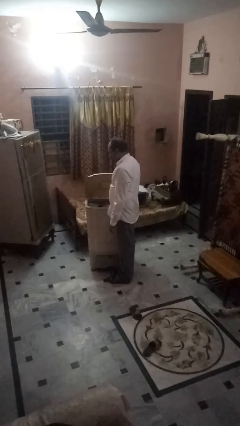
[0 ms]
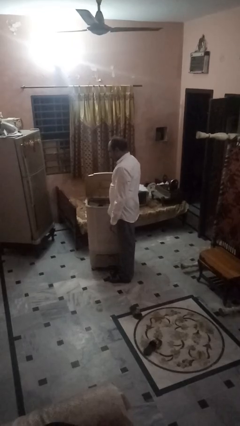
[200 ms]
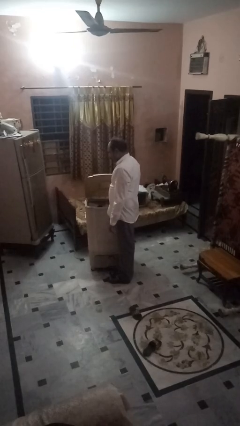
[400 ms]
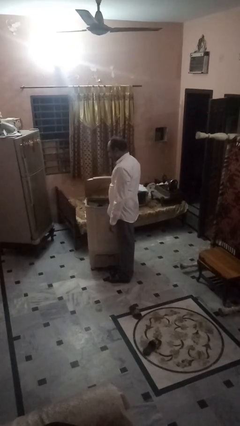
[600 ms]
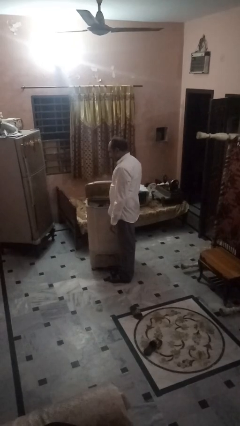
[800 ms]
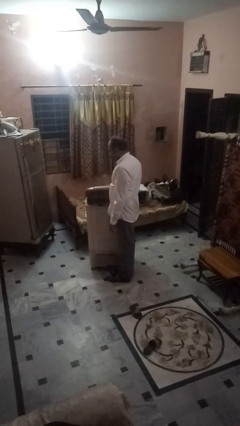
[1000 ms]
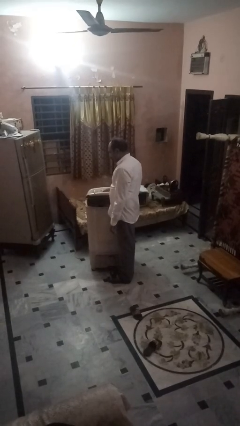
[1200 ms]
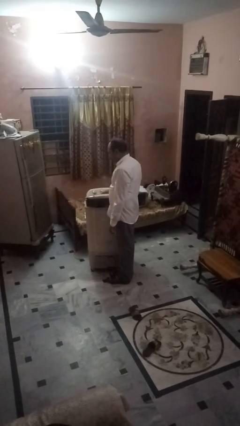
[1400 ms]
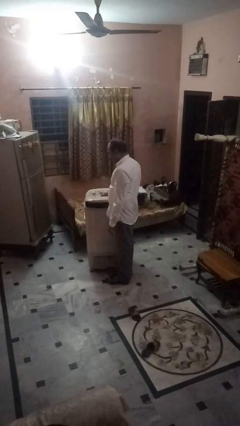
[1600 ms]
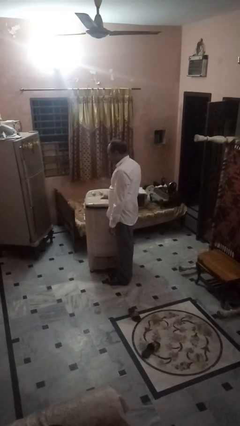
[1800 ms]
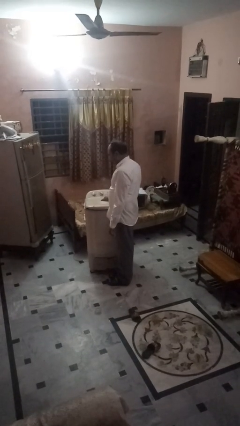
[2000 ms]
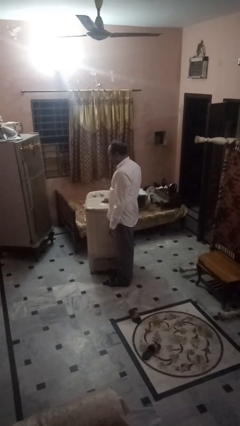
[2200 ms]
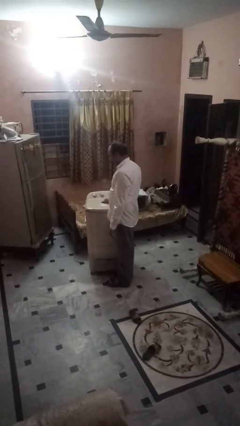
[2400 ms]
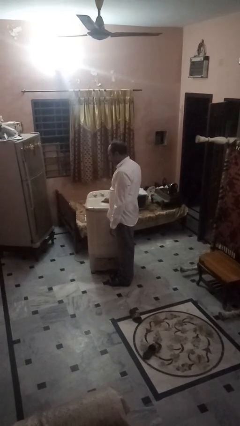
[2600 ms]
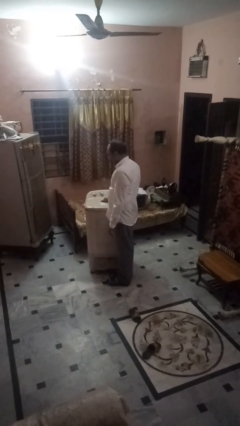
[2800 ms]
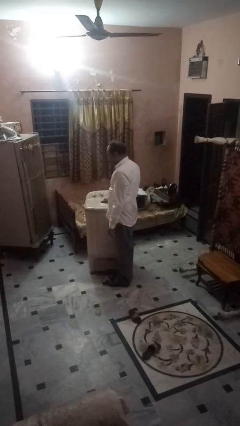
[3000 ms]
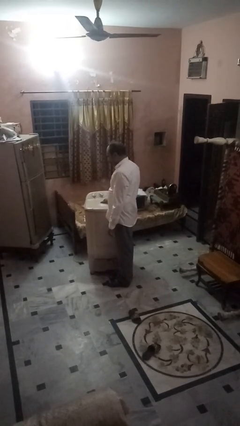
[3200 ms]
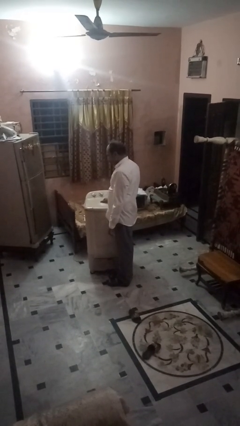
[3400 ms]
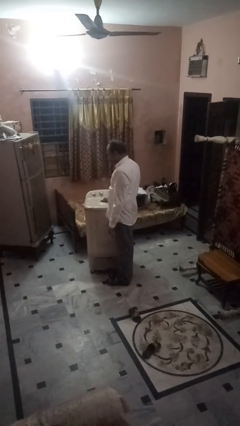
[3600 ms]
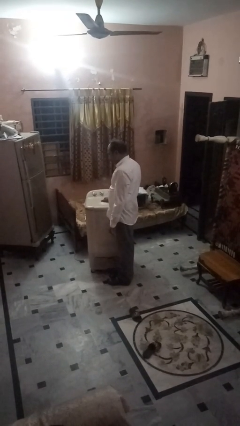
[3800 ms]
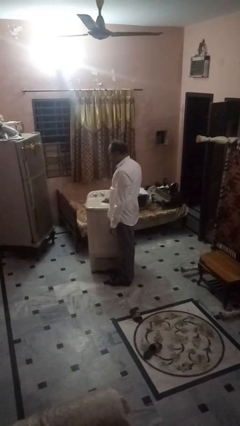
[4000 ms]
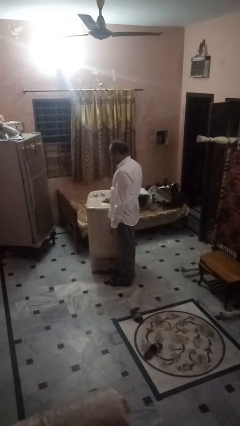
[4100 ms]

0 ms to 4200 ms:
person closes clothes washer

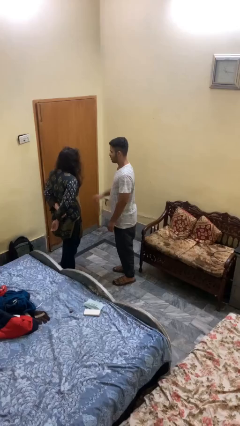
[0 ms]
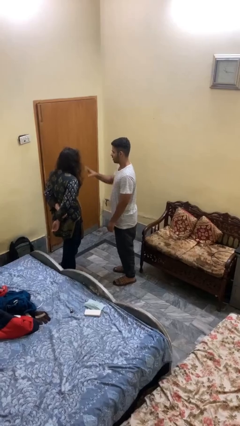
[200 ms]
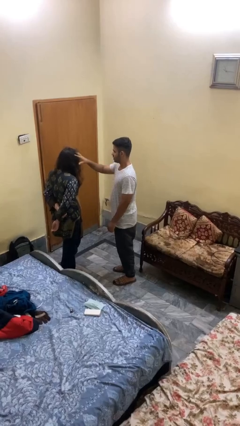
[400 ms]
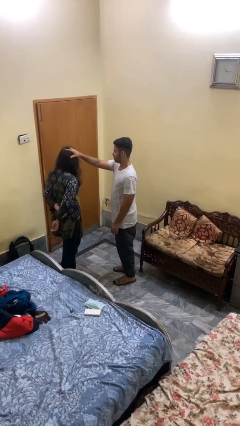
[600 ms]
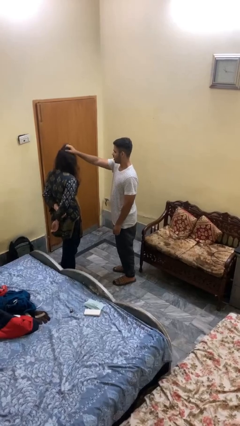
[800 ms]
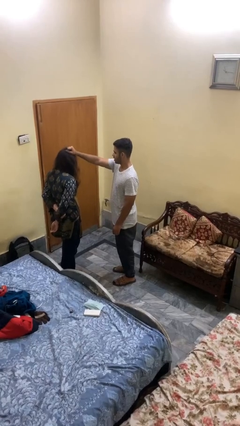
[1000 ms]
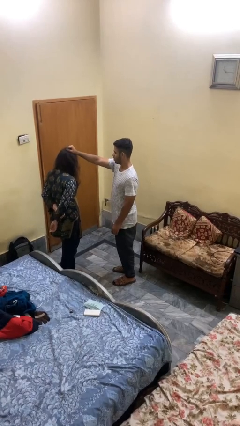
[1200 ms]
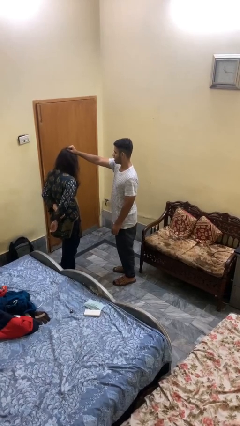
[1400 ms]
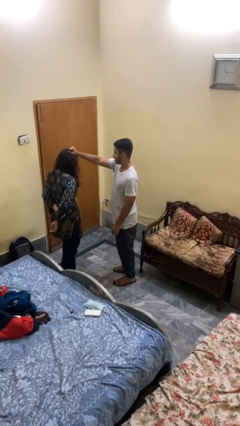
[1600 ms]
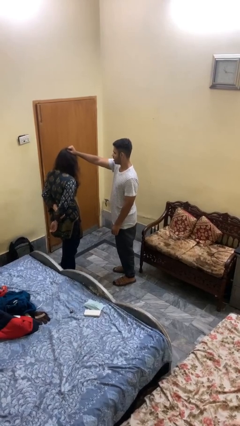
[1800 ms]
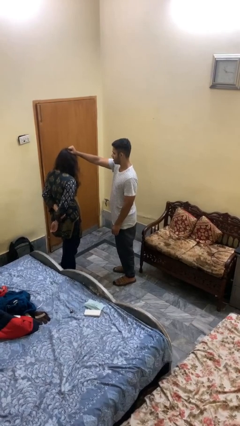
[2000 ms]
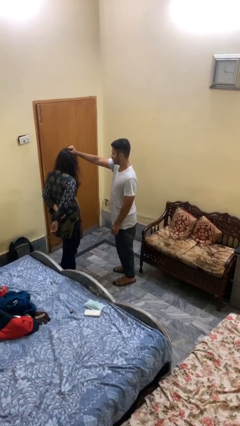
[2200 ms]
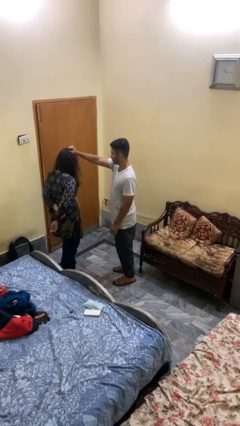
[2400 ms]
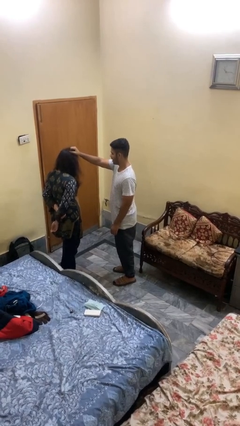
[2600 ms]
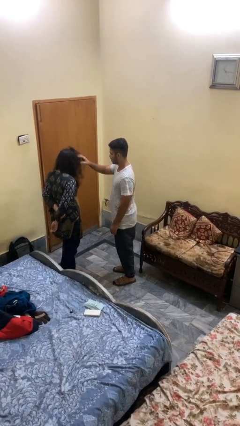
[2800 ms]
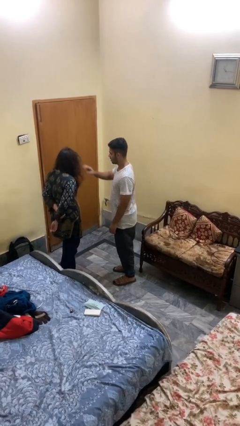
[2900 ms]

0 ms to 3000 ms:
person grabs person by hair

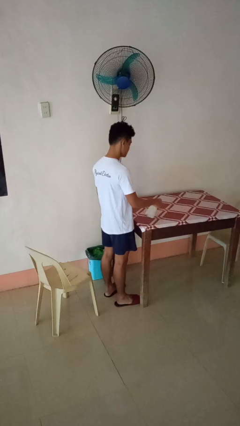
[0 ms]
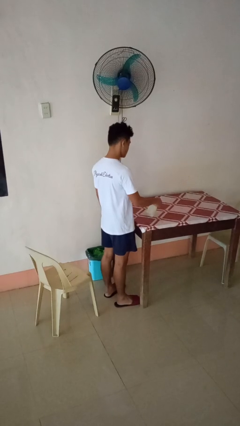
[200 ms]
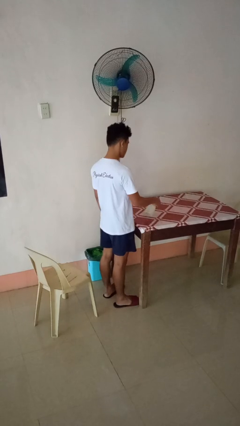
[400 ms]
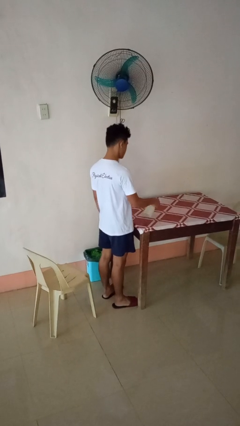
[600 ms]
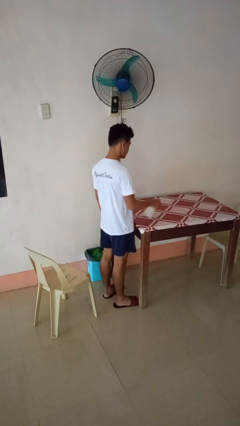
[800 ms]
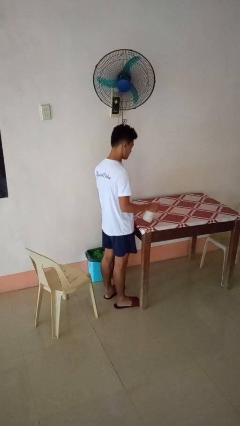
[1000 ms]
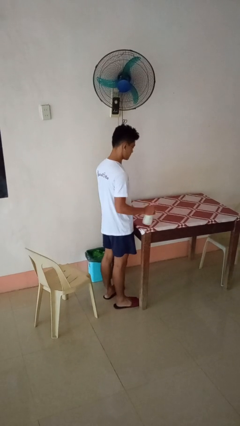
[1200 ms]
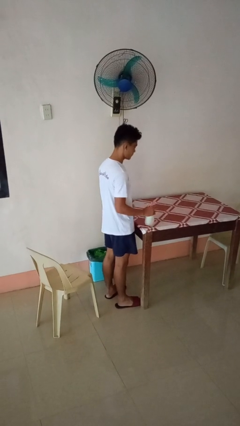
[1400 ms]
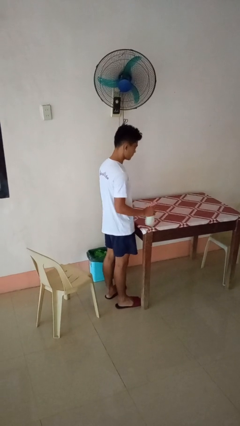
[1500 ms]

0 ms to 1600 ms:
person sprays from bottle

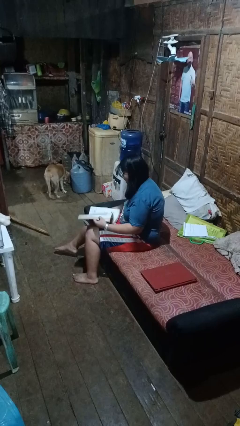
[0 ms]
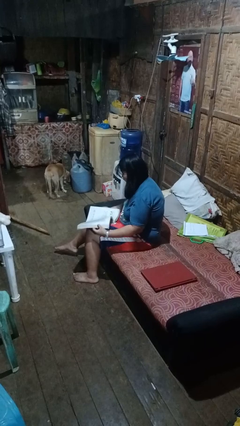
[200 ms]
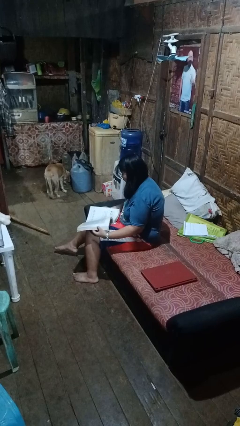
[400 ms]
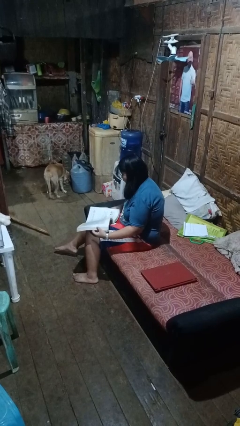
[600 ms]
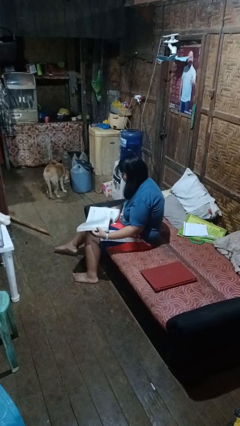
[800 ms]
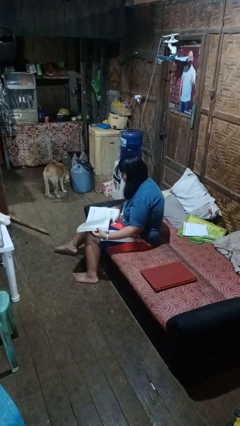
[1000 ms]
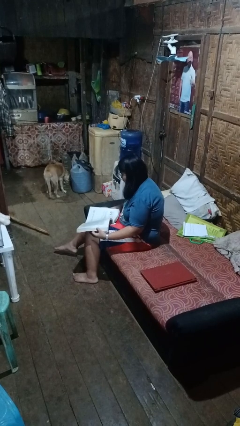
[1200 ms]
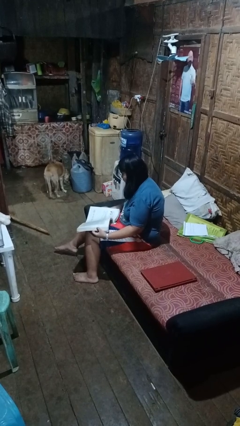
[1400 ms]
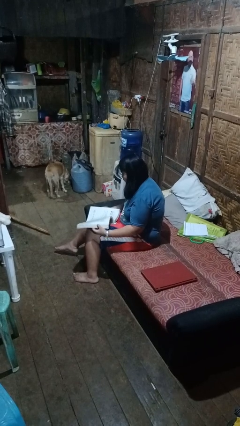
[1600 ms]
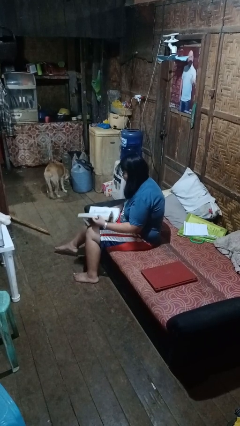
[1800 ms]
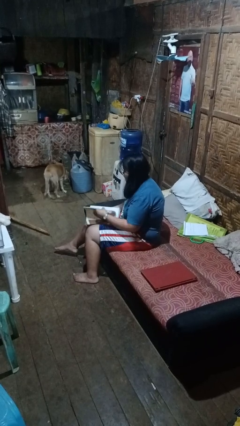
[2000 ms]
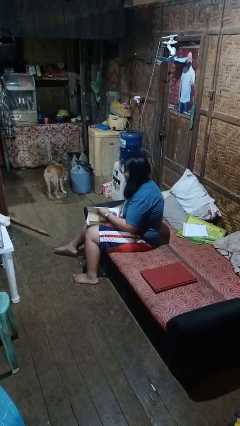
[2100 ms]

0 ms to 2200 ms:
person reads book

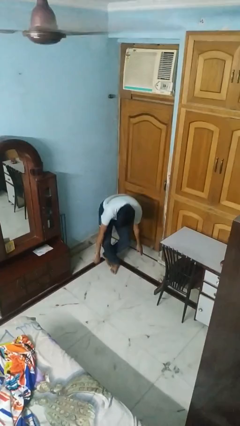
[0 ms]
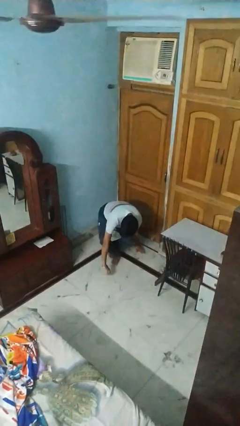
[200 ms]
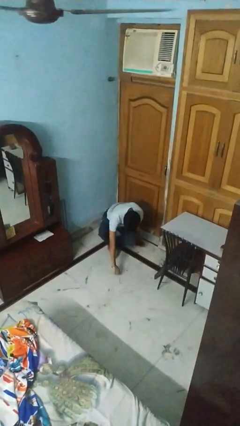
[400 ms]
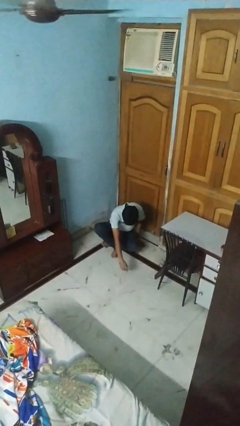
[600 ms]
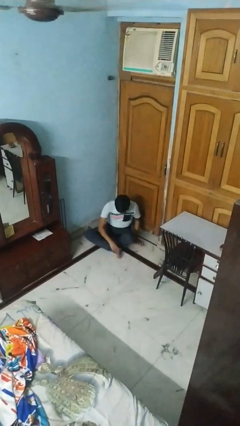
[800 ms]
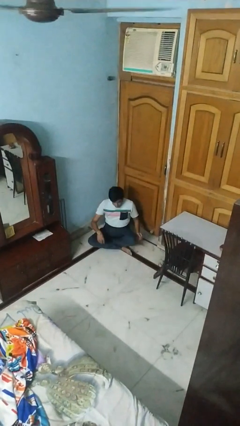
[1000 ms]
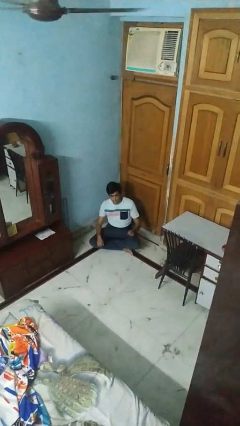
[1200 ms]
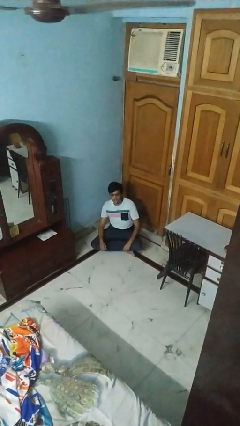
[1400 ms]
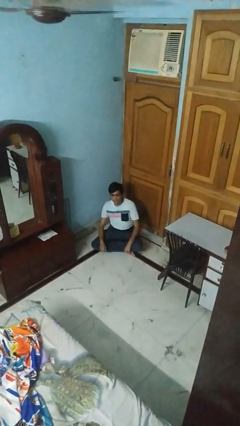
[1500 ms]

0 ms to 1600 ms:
person sits crisscross

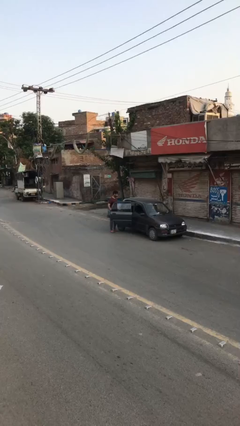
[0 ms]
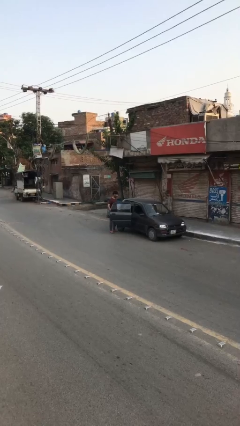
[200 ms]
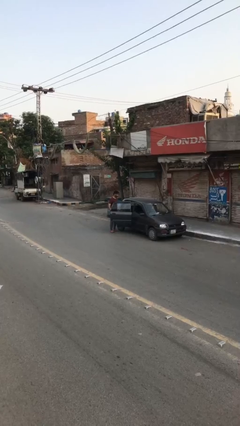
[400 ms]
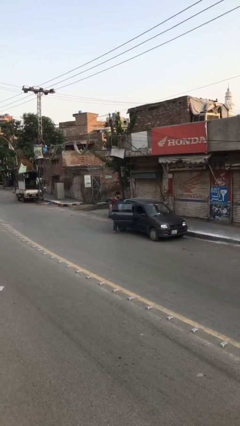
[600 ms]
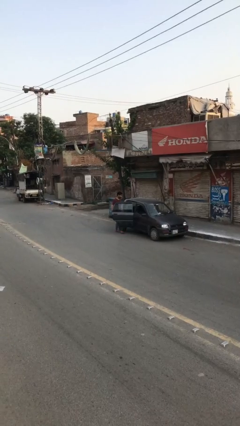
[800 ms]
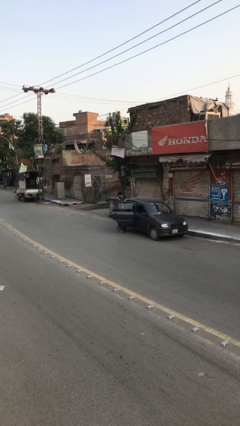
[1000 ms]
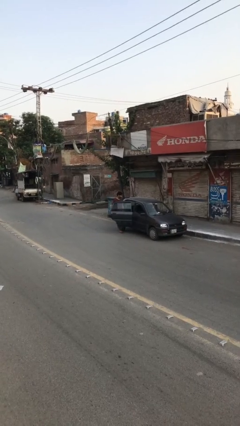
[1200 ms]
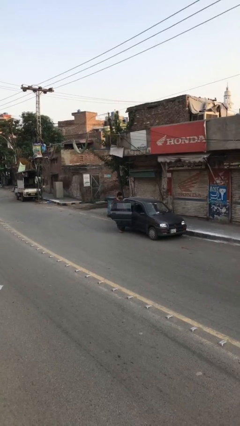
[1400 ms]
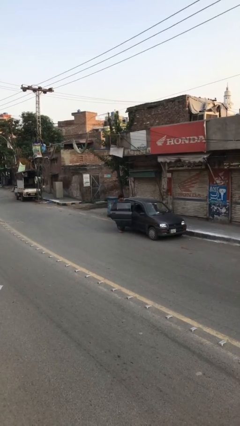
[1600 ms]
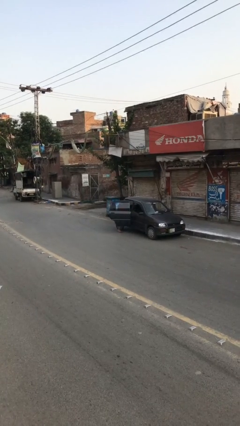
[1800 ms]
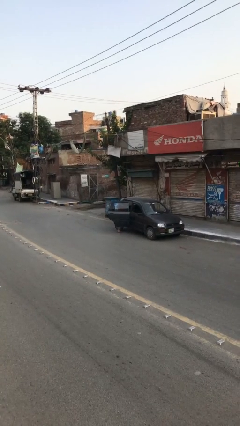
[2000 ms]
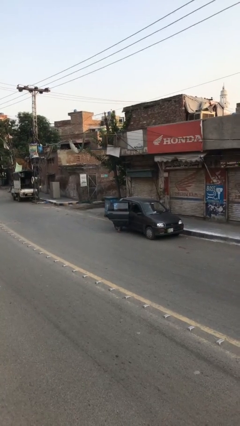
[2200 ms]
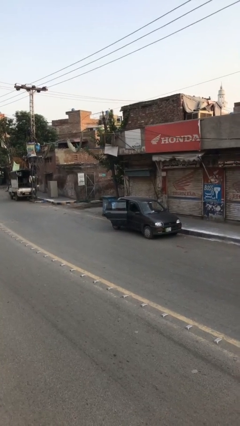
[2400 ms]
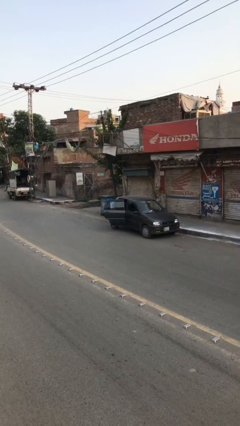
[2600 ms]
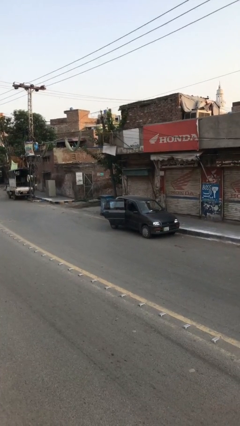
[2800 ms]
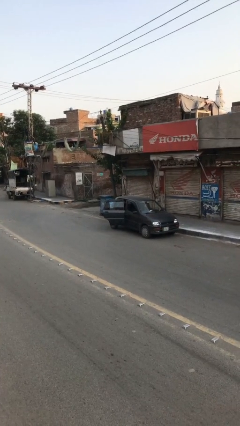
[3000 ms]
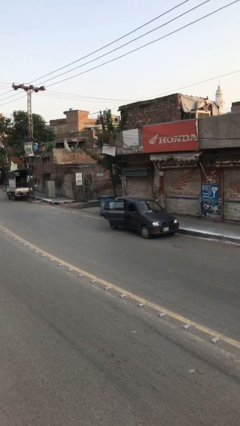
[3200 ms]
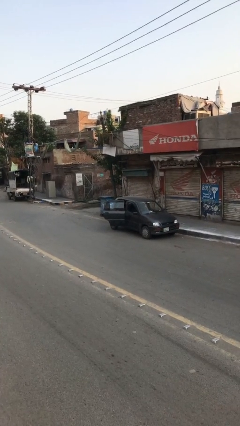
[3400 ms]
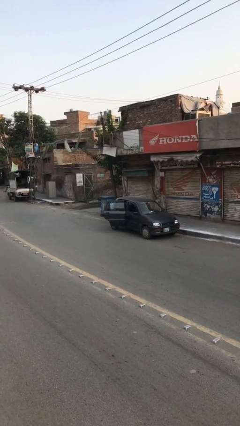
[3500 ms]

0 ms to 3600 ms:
person enters car

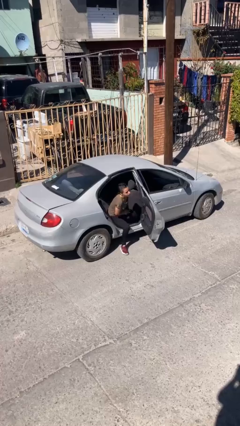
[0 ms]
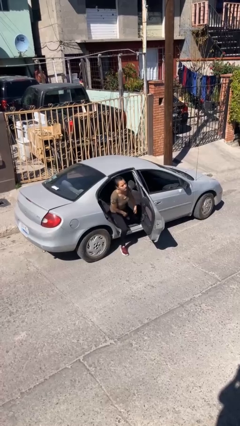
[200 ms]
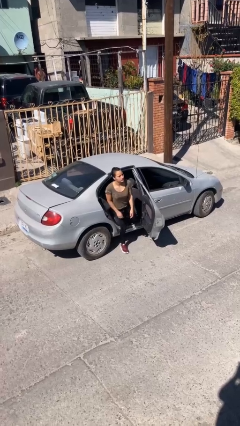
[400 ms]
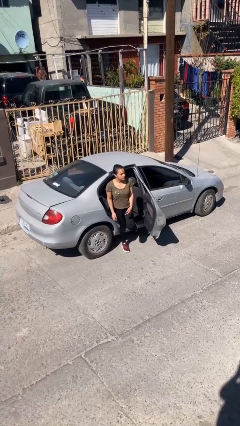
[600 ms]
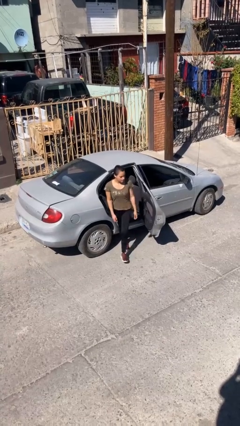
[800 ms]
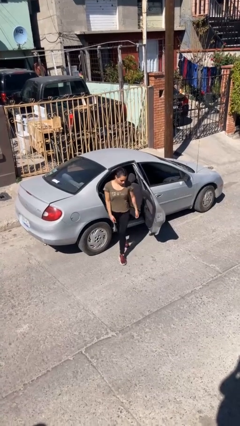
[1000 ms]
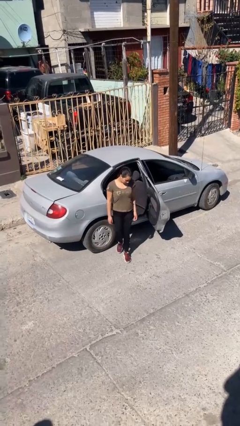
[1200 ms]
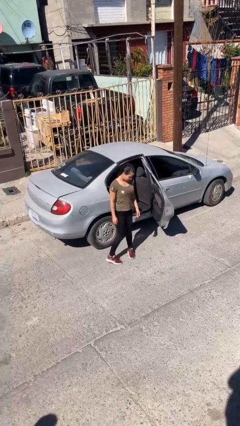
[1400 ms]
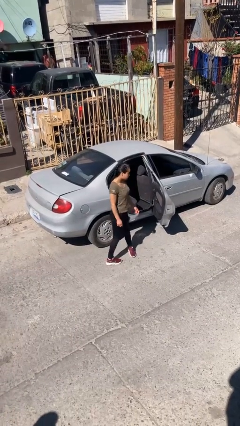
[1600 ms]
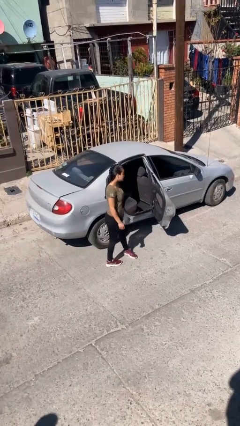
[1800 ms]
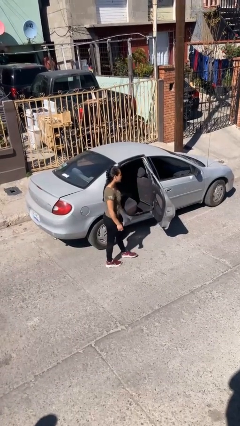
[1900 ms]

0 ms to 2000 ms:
person exits car
